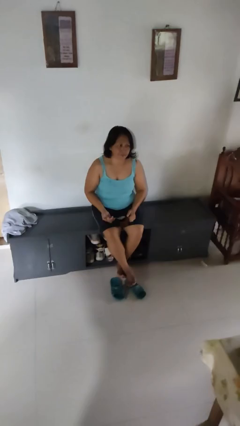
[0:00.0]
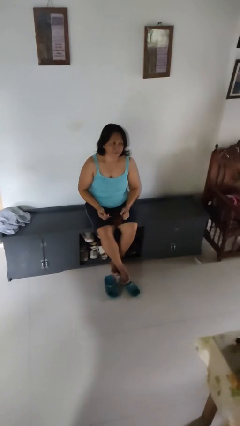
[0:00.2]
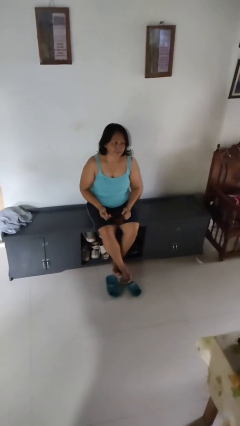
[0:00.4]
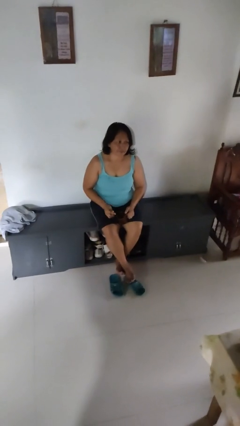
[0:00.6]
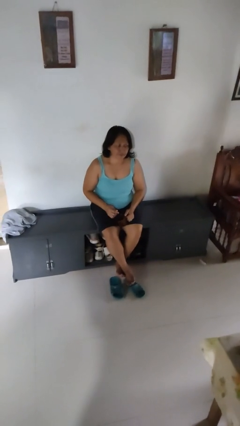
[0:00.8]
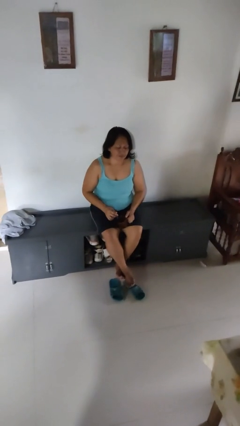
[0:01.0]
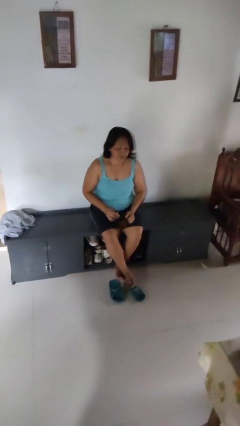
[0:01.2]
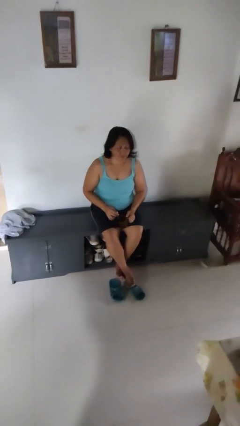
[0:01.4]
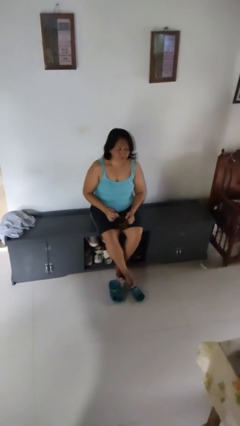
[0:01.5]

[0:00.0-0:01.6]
person stirs mug

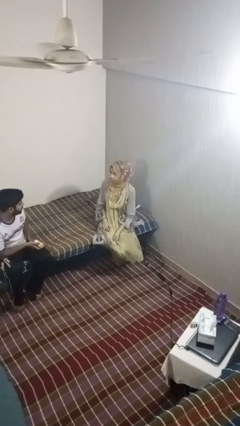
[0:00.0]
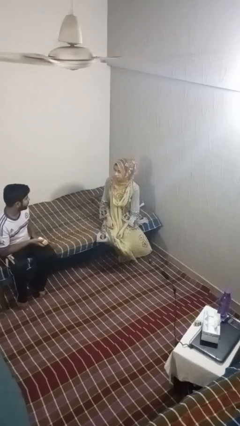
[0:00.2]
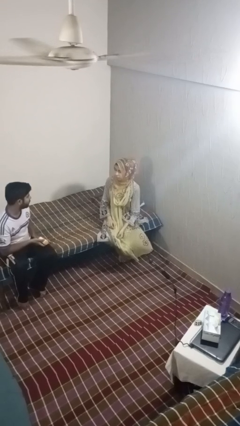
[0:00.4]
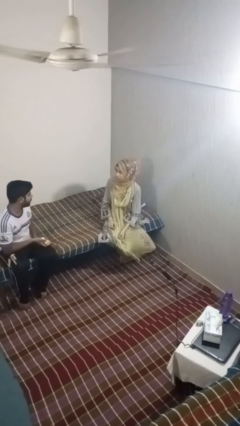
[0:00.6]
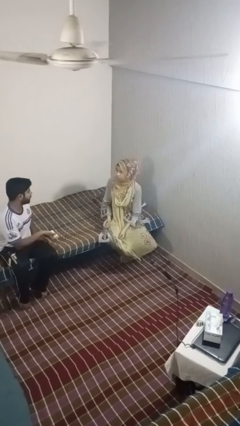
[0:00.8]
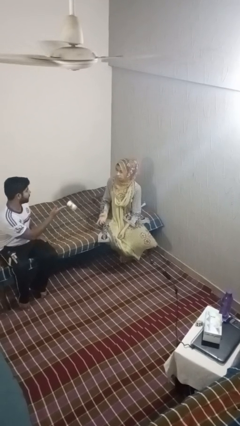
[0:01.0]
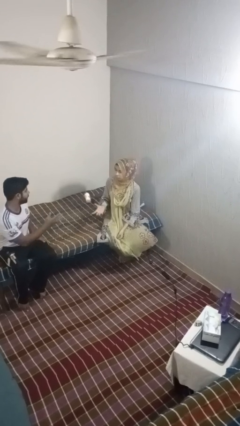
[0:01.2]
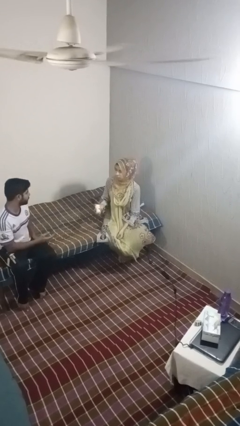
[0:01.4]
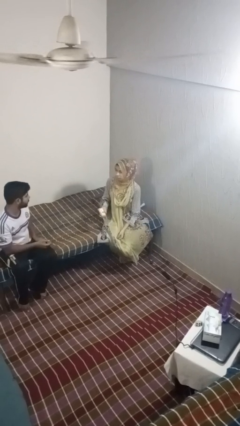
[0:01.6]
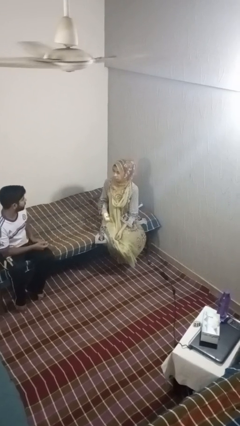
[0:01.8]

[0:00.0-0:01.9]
person catches object from person

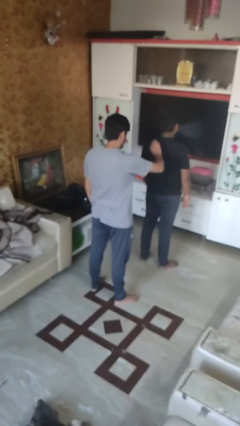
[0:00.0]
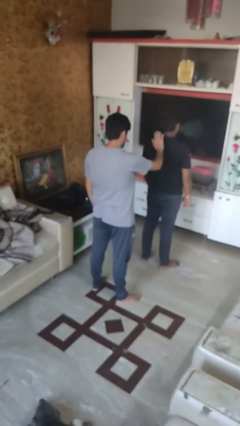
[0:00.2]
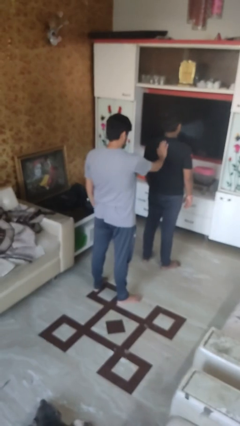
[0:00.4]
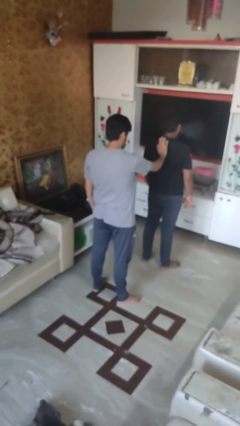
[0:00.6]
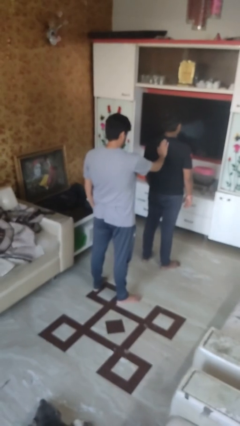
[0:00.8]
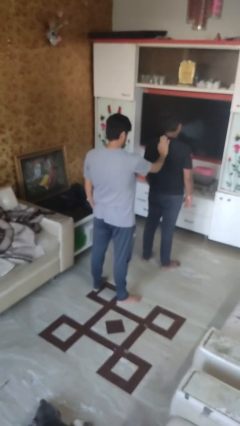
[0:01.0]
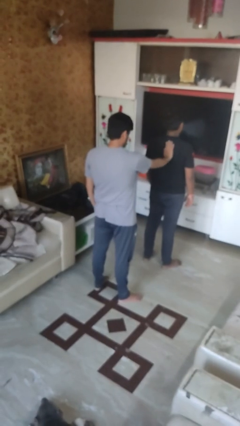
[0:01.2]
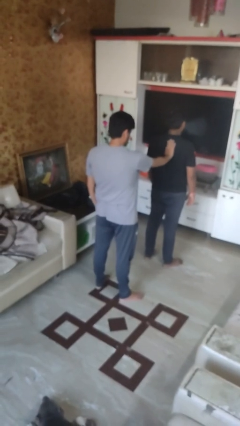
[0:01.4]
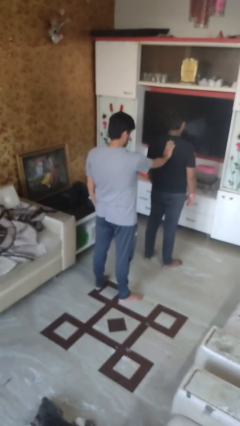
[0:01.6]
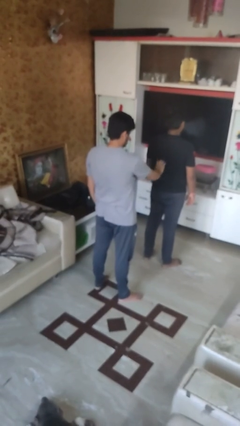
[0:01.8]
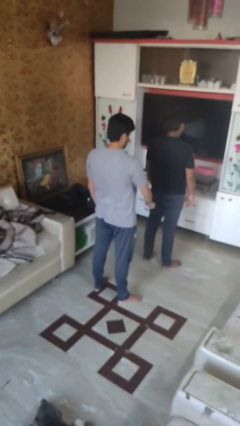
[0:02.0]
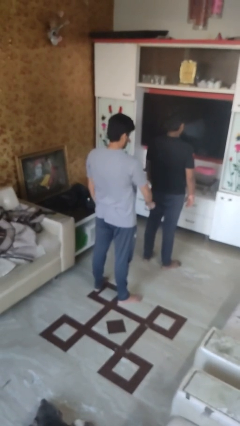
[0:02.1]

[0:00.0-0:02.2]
person touches back of person

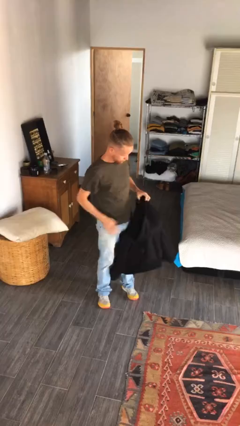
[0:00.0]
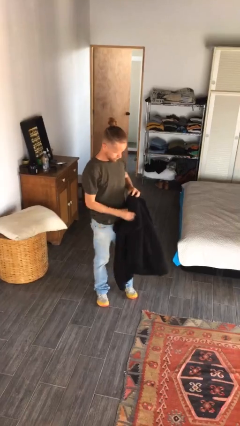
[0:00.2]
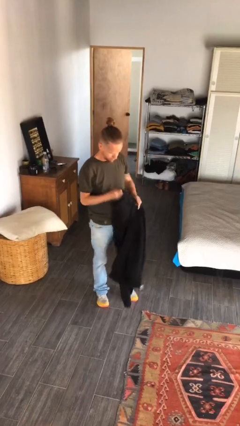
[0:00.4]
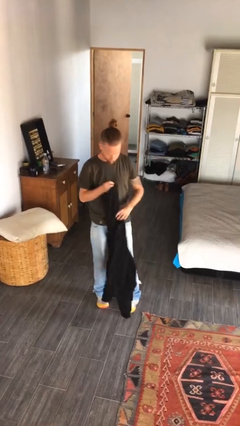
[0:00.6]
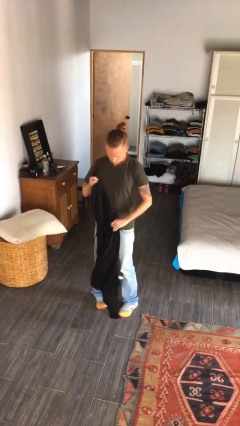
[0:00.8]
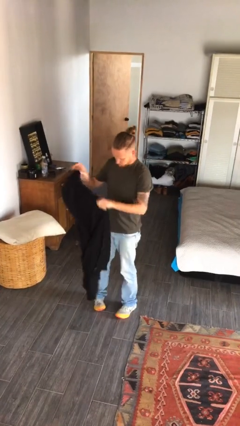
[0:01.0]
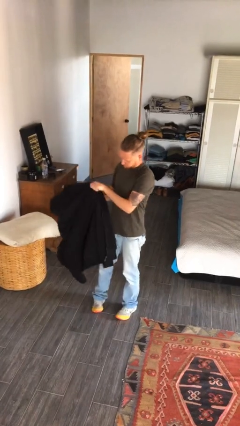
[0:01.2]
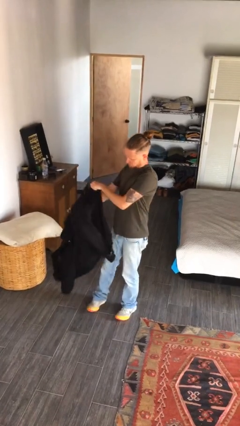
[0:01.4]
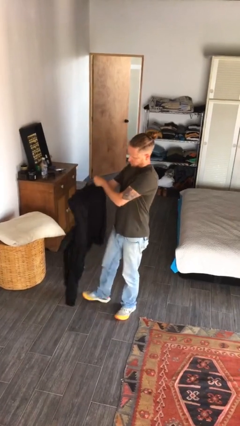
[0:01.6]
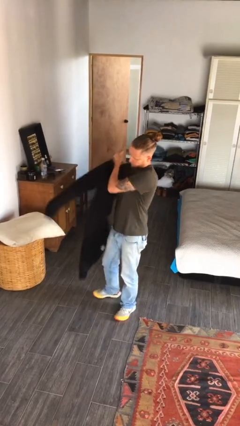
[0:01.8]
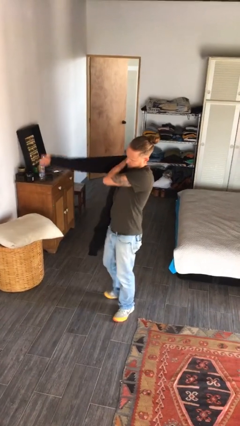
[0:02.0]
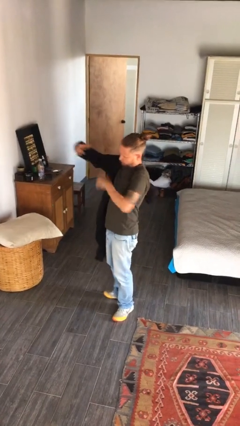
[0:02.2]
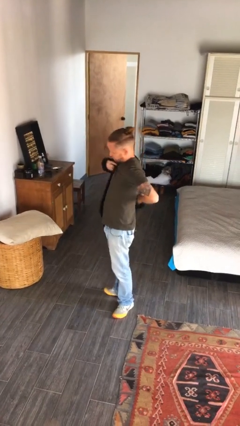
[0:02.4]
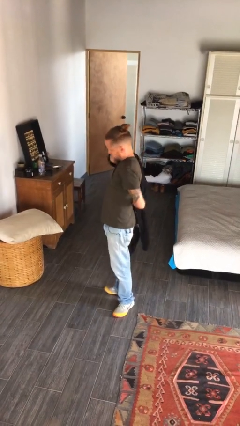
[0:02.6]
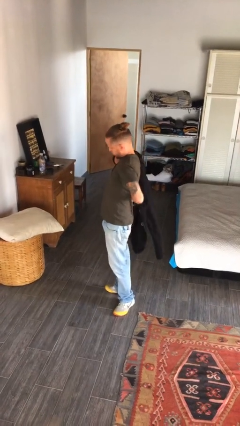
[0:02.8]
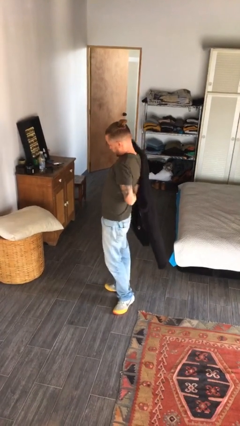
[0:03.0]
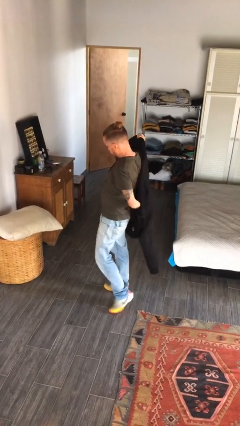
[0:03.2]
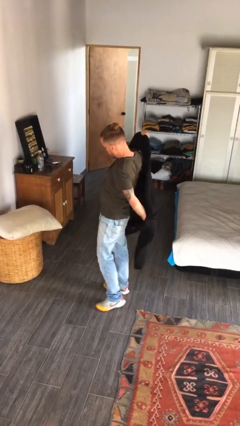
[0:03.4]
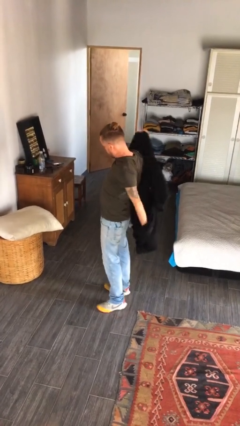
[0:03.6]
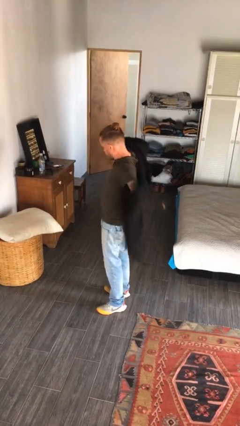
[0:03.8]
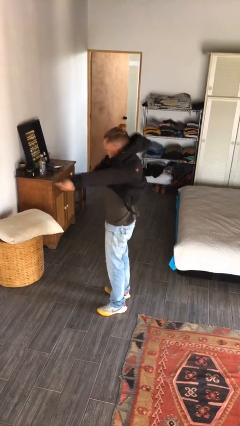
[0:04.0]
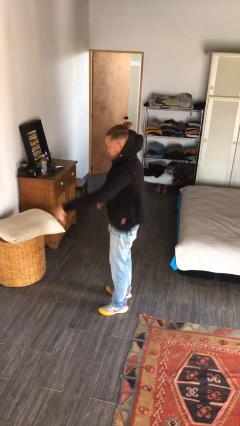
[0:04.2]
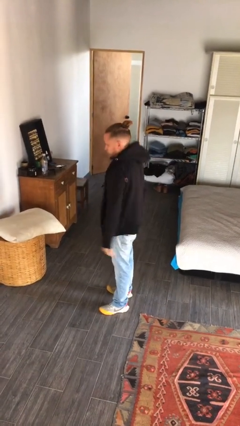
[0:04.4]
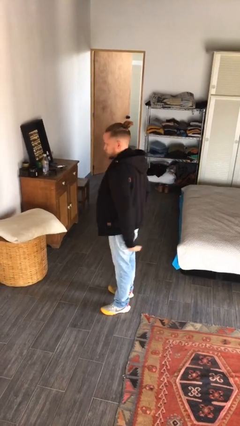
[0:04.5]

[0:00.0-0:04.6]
person puts on jacket

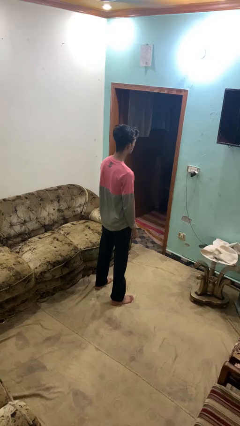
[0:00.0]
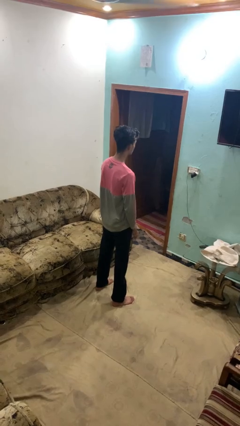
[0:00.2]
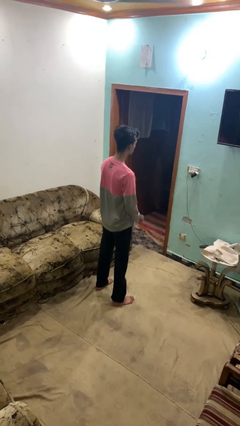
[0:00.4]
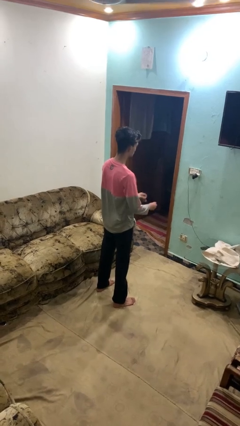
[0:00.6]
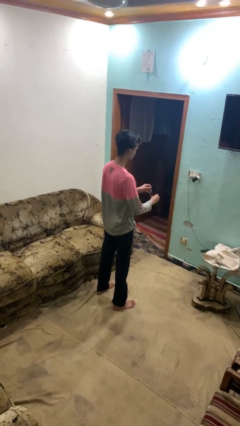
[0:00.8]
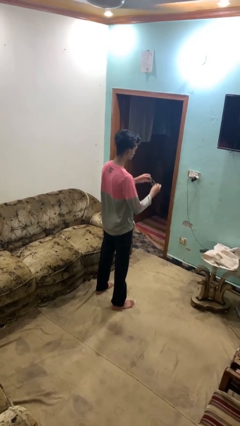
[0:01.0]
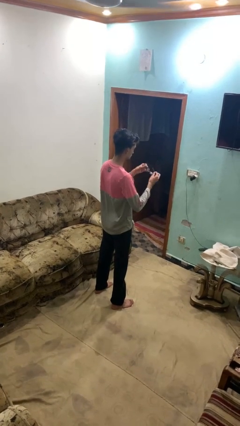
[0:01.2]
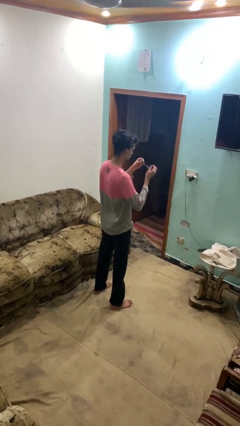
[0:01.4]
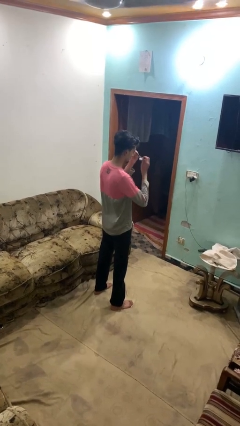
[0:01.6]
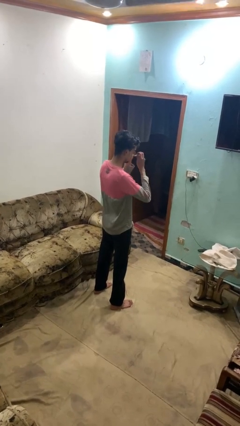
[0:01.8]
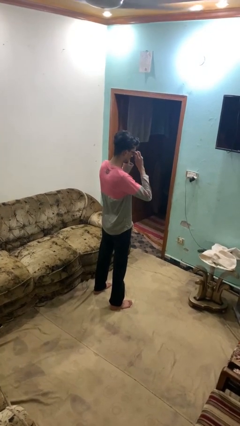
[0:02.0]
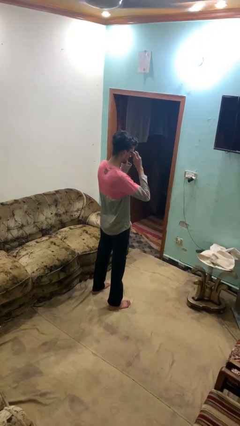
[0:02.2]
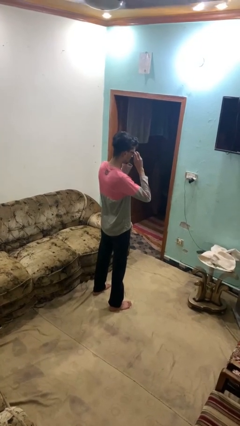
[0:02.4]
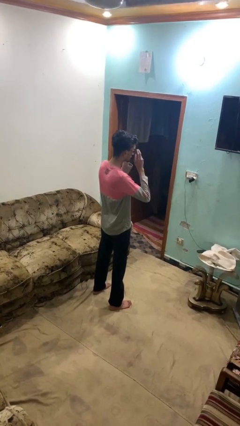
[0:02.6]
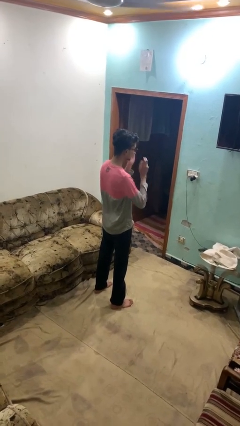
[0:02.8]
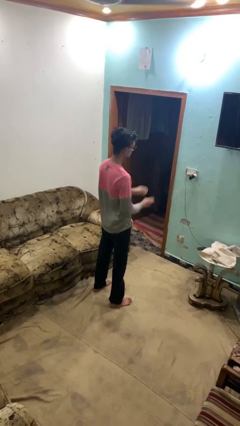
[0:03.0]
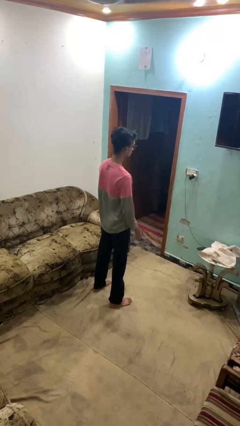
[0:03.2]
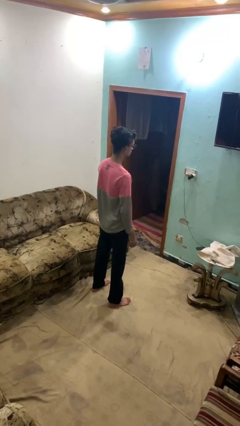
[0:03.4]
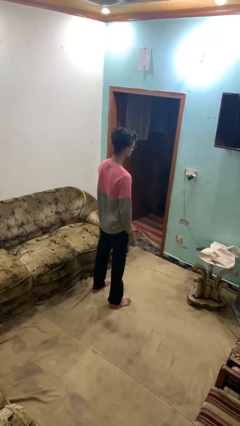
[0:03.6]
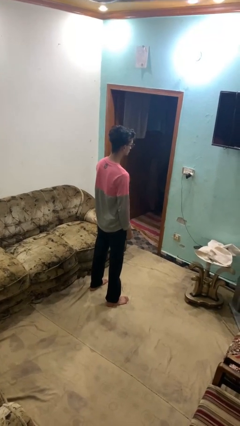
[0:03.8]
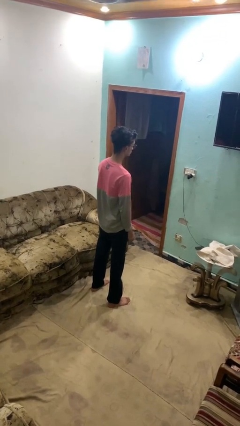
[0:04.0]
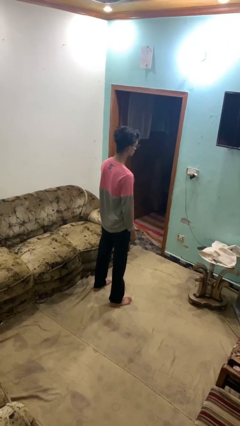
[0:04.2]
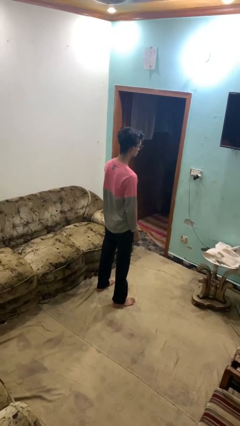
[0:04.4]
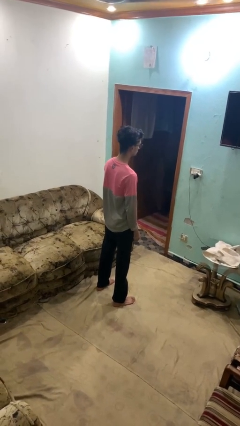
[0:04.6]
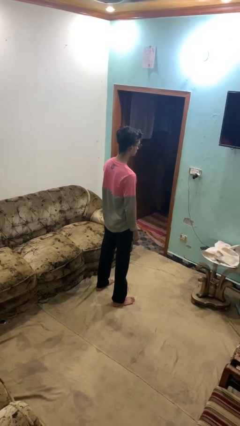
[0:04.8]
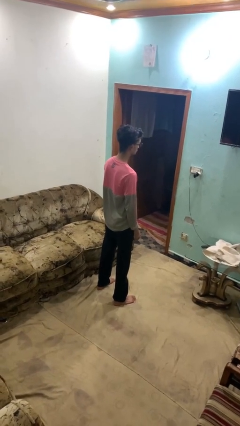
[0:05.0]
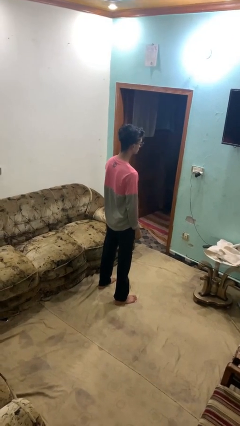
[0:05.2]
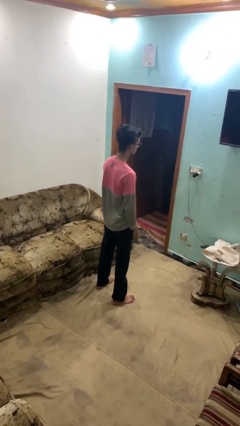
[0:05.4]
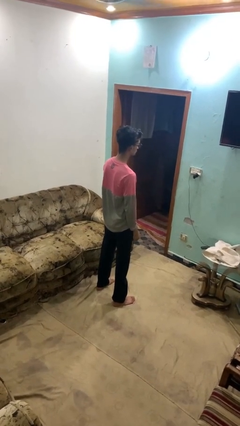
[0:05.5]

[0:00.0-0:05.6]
person puts on glasses

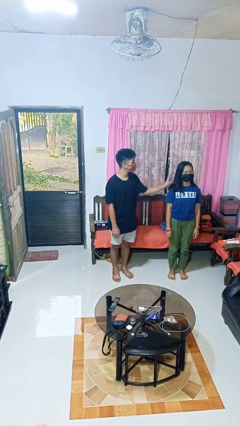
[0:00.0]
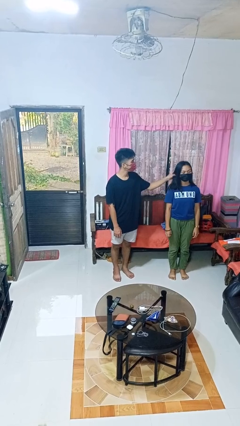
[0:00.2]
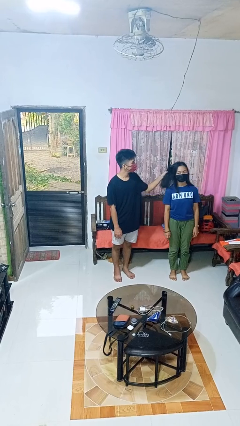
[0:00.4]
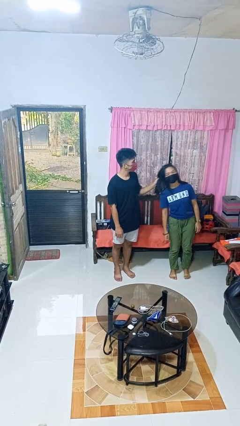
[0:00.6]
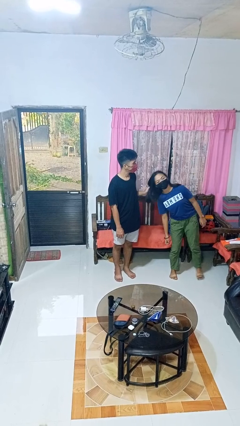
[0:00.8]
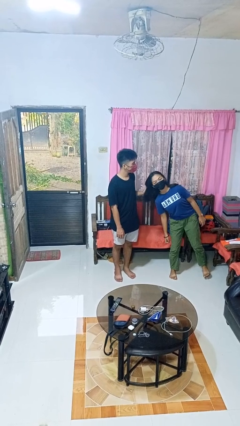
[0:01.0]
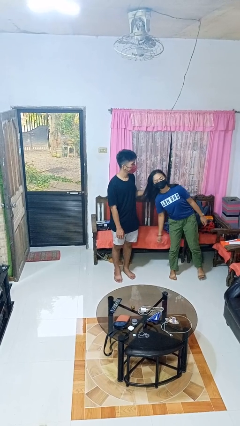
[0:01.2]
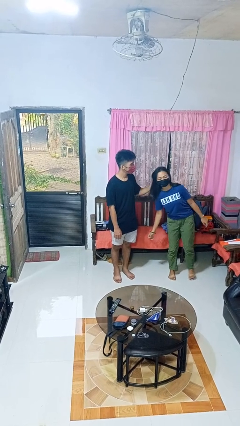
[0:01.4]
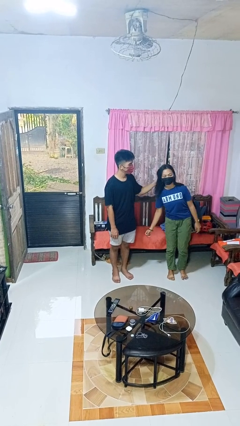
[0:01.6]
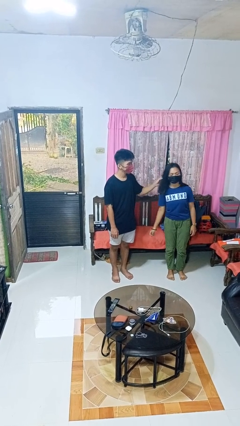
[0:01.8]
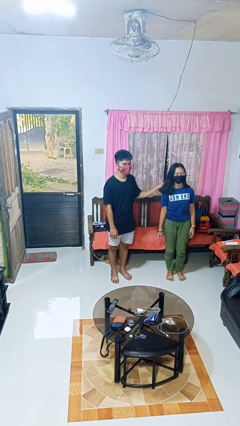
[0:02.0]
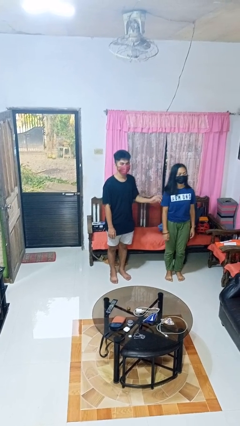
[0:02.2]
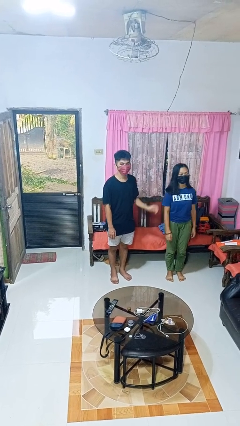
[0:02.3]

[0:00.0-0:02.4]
person grabs person by hair
